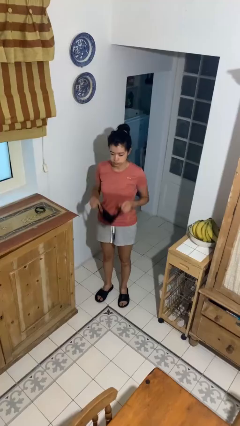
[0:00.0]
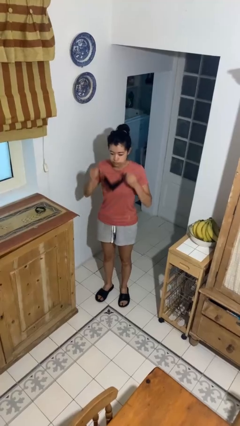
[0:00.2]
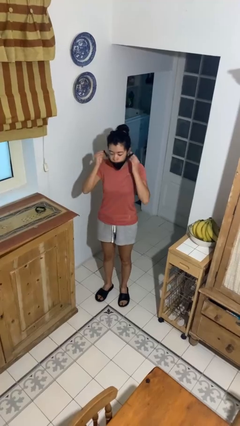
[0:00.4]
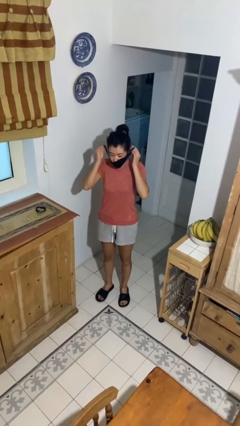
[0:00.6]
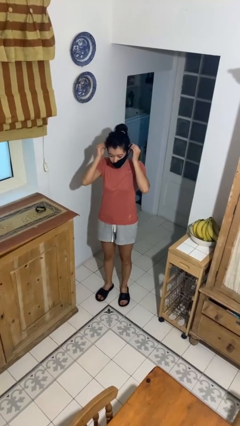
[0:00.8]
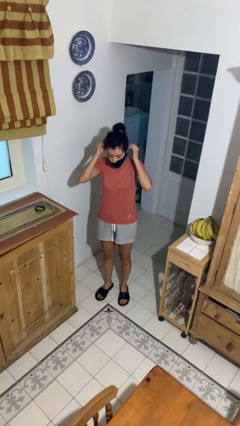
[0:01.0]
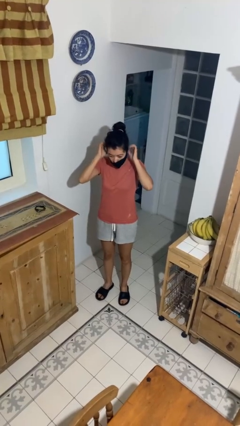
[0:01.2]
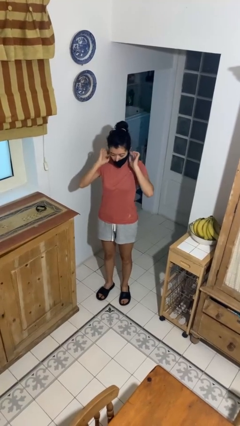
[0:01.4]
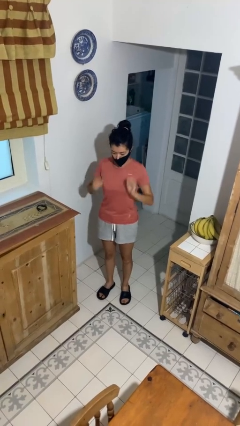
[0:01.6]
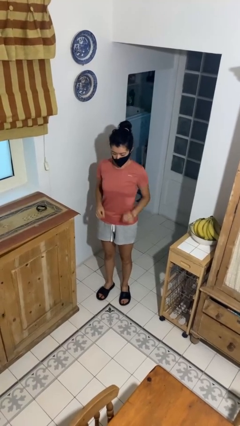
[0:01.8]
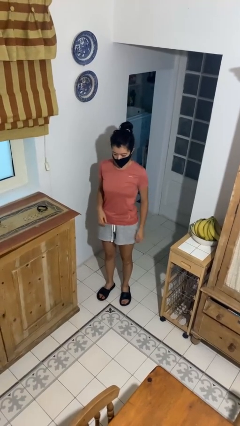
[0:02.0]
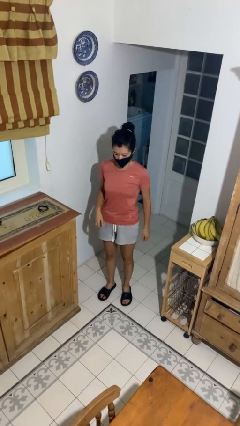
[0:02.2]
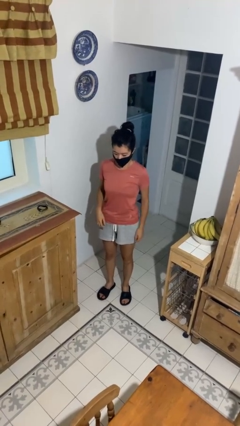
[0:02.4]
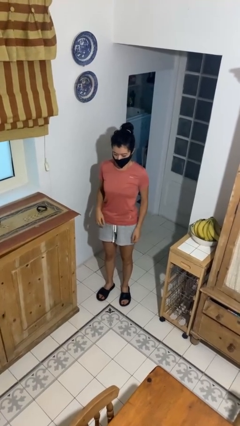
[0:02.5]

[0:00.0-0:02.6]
person puts on facemask

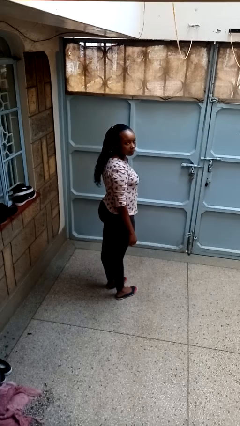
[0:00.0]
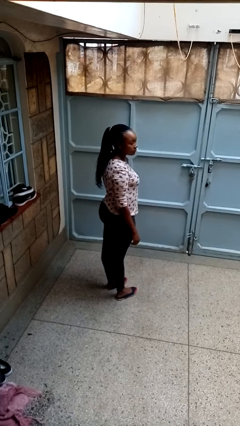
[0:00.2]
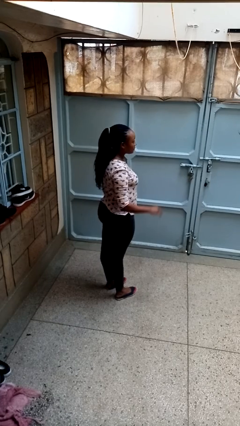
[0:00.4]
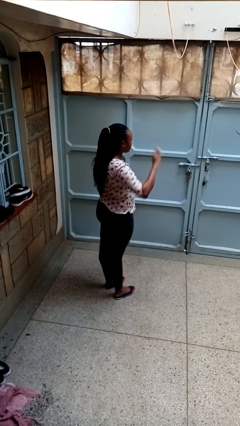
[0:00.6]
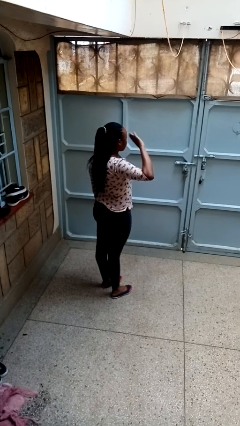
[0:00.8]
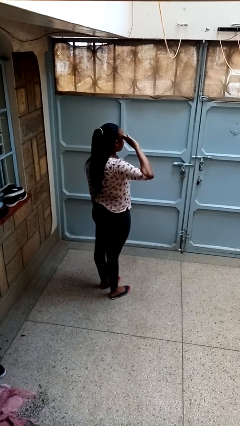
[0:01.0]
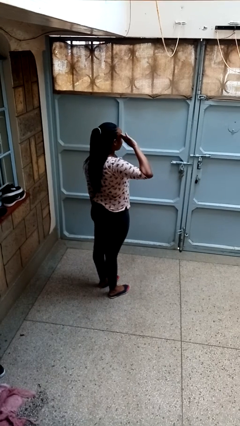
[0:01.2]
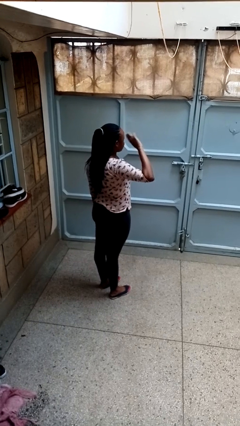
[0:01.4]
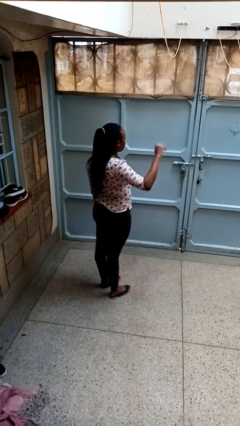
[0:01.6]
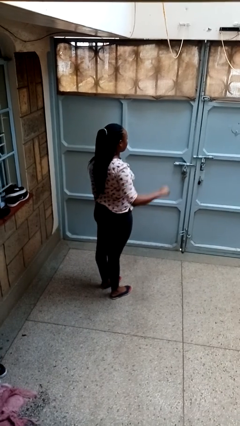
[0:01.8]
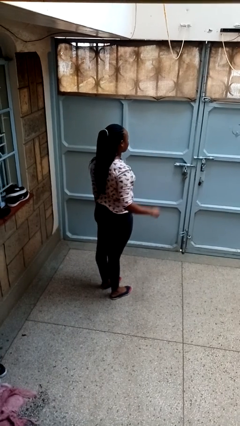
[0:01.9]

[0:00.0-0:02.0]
person salutes

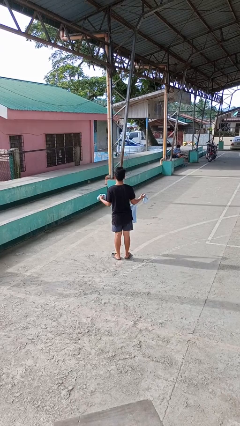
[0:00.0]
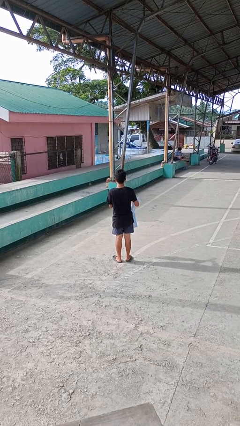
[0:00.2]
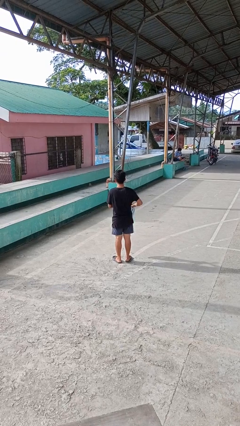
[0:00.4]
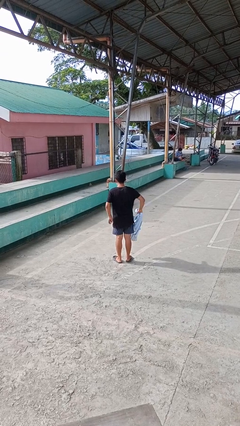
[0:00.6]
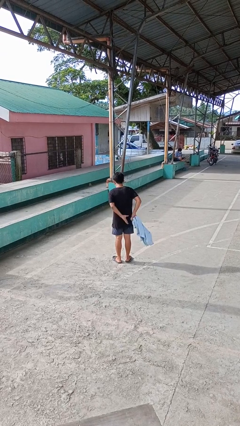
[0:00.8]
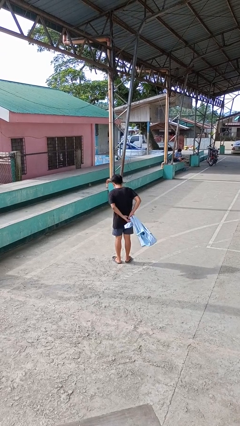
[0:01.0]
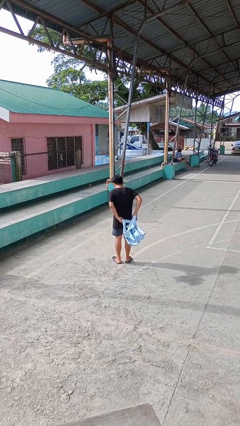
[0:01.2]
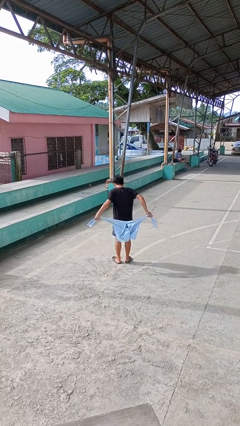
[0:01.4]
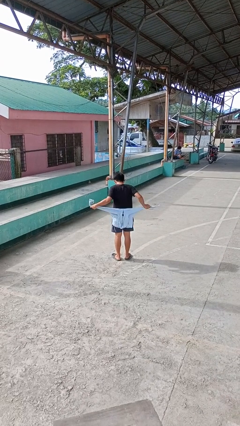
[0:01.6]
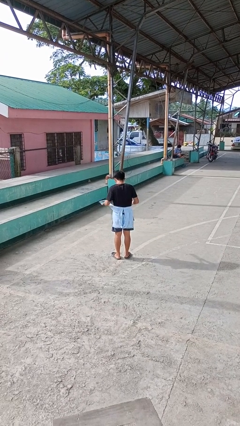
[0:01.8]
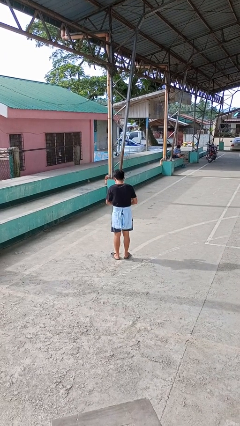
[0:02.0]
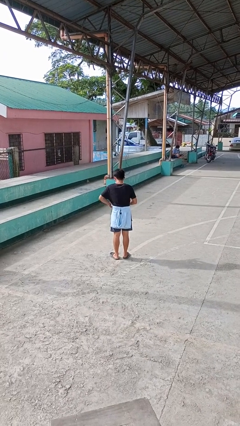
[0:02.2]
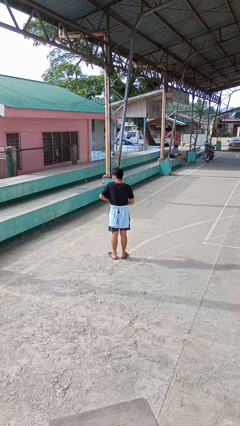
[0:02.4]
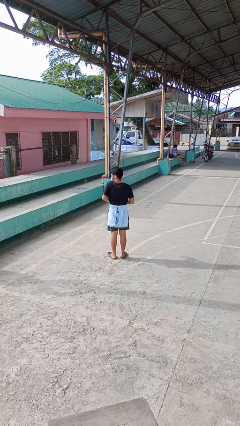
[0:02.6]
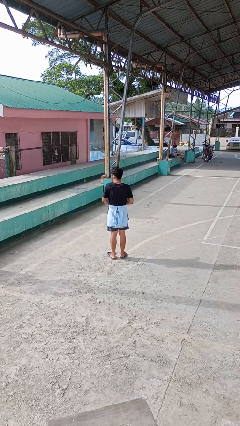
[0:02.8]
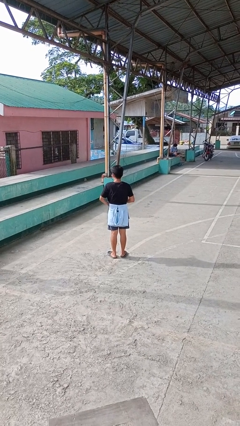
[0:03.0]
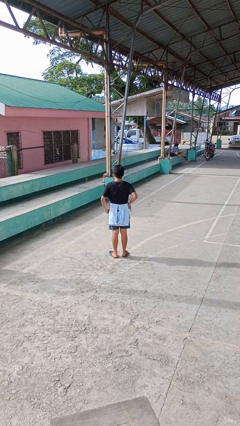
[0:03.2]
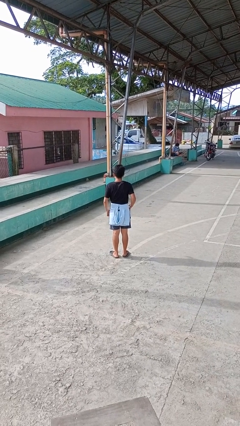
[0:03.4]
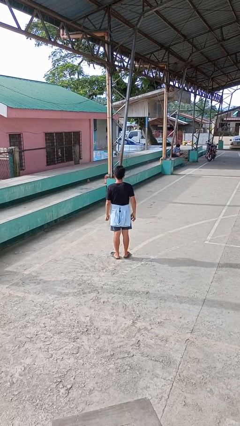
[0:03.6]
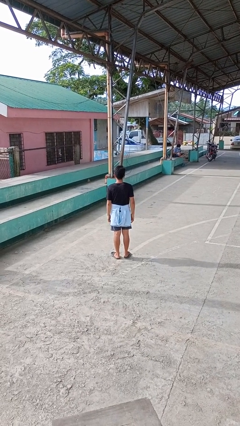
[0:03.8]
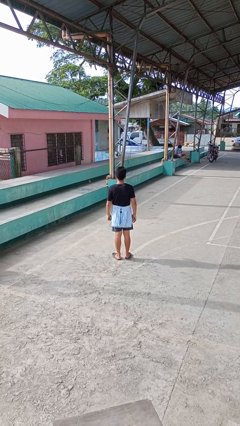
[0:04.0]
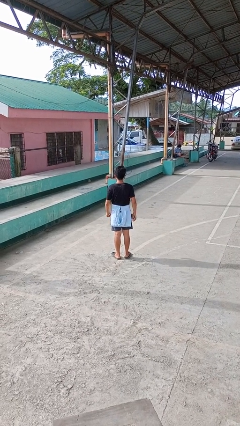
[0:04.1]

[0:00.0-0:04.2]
person ties jacket around waist

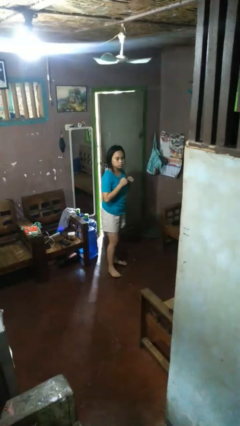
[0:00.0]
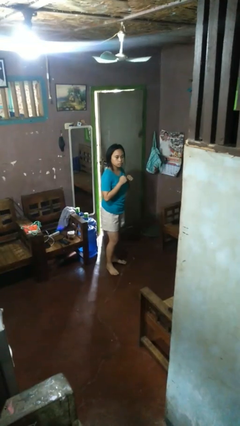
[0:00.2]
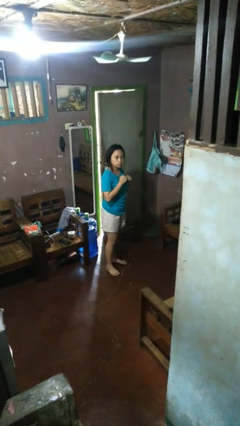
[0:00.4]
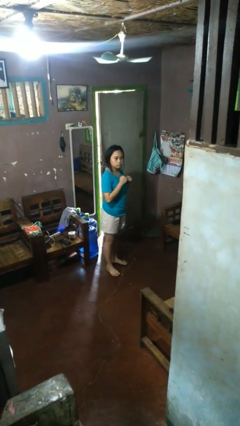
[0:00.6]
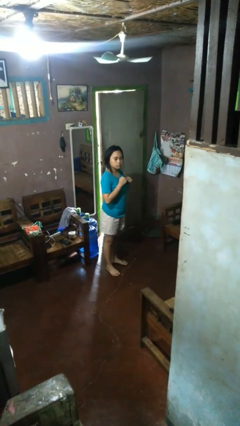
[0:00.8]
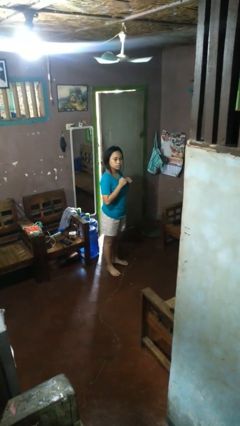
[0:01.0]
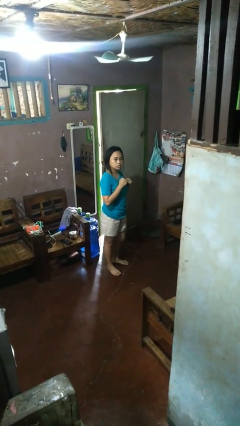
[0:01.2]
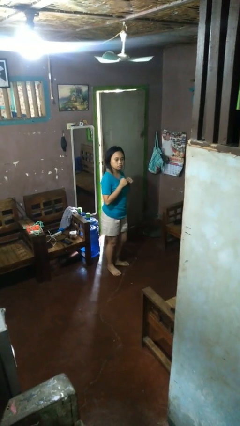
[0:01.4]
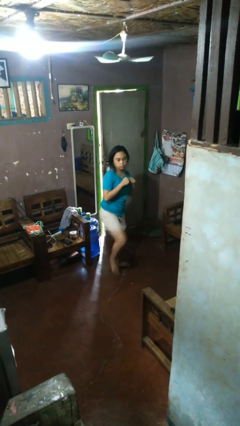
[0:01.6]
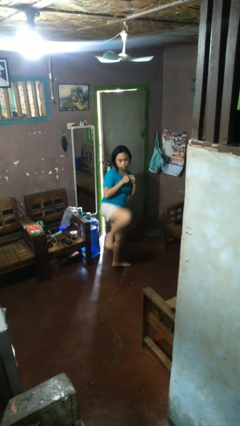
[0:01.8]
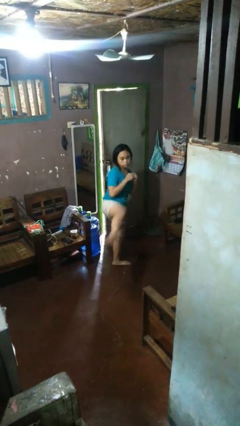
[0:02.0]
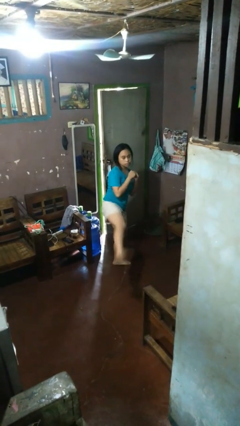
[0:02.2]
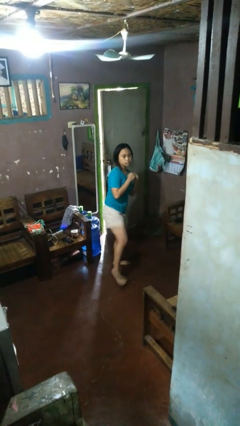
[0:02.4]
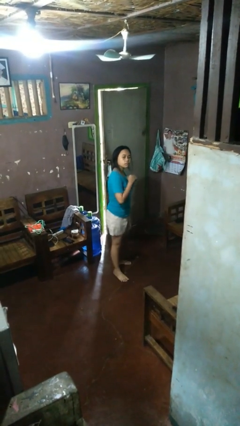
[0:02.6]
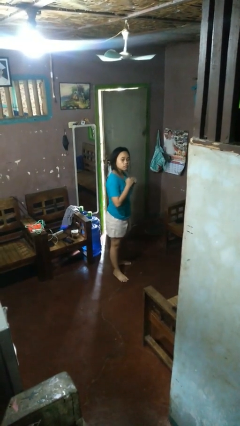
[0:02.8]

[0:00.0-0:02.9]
person karate kicks

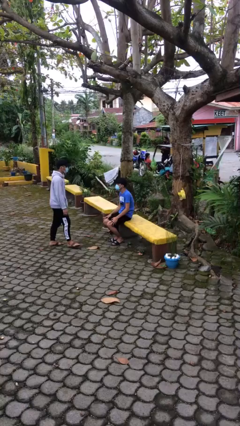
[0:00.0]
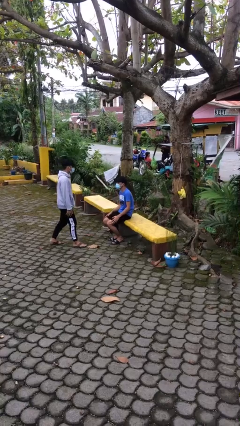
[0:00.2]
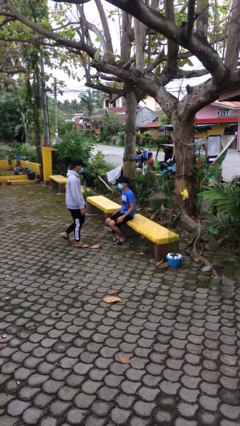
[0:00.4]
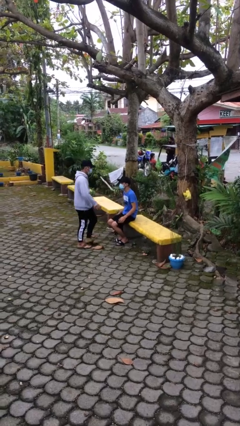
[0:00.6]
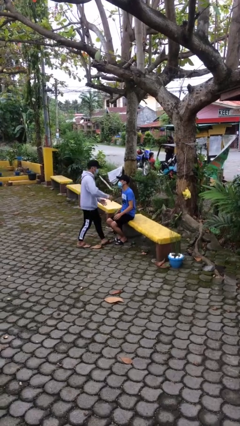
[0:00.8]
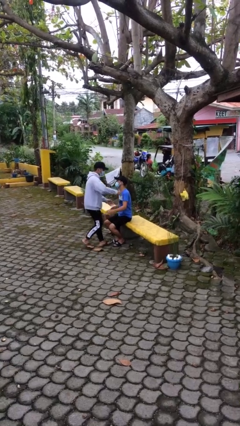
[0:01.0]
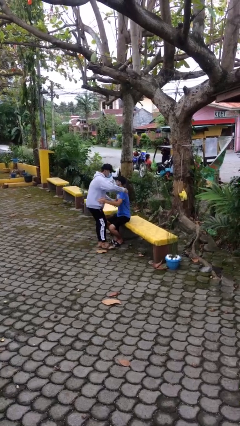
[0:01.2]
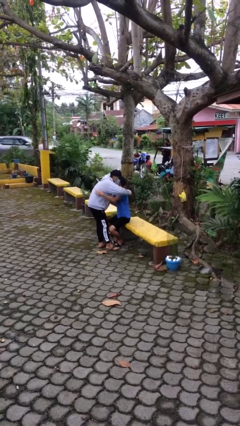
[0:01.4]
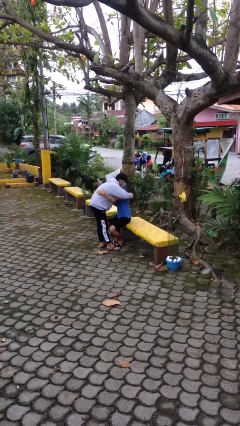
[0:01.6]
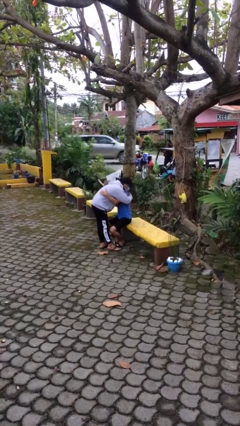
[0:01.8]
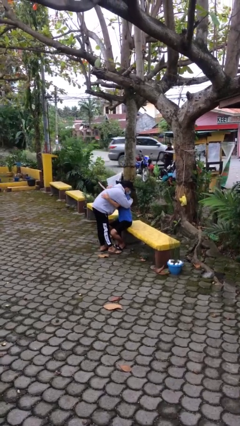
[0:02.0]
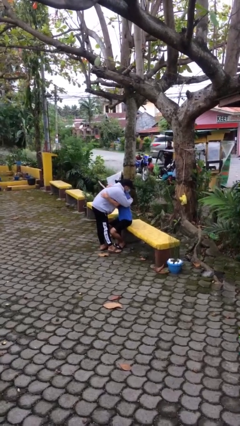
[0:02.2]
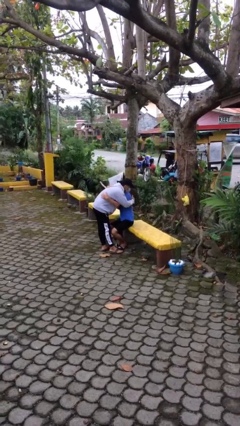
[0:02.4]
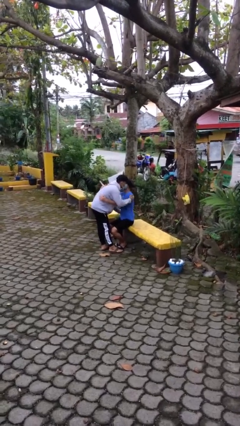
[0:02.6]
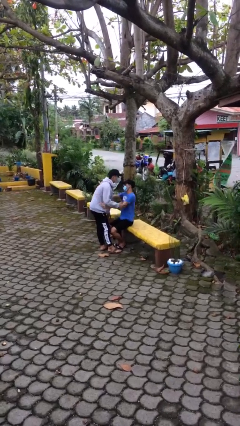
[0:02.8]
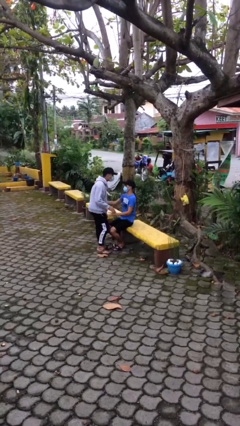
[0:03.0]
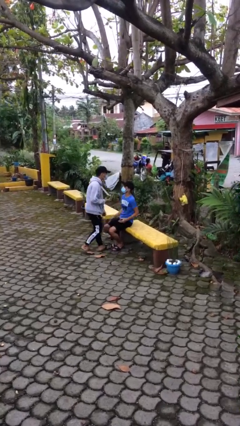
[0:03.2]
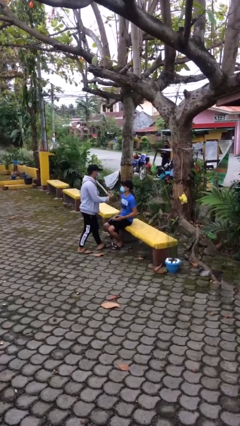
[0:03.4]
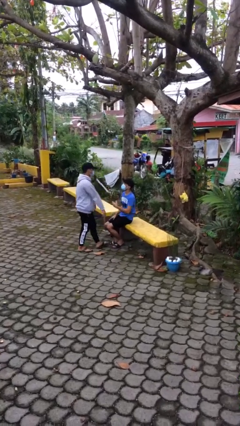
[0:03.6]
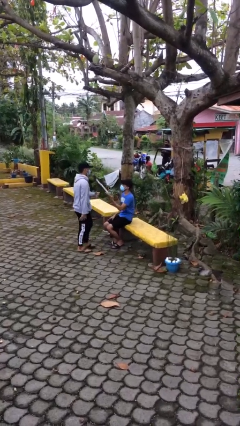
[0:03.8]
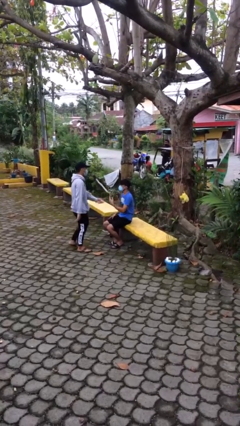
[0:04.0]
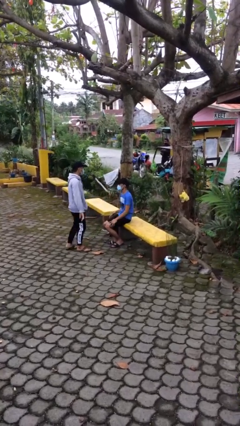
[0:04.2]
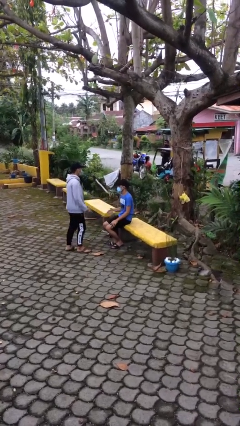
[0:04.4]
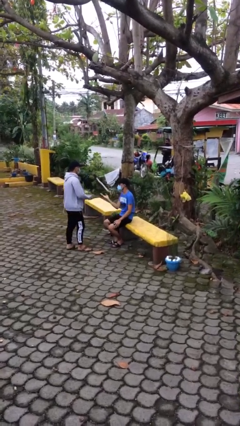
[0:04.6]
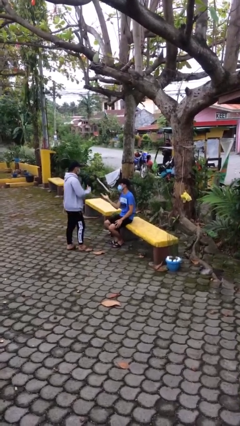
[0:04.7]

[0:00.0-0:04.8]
person embraces person

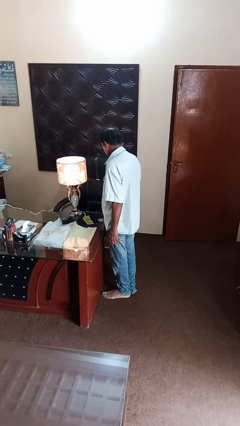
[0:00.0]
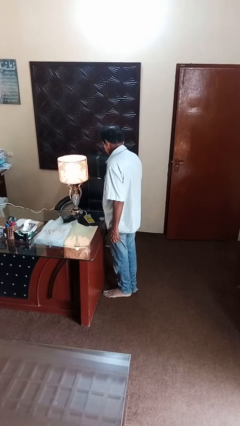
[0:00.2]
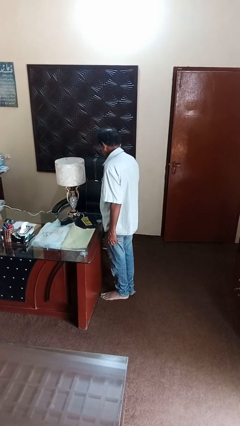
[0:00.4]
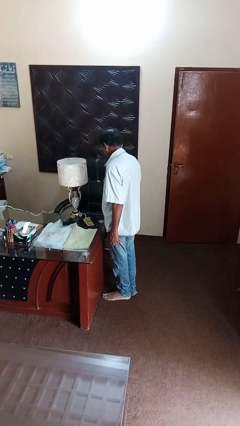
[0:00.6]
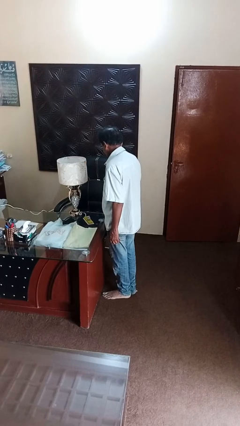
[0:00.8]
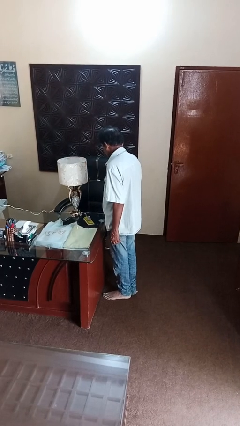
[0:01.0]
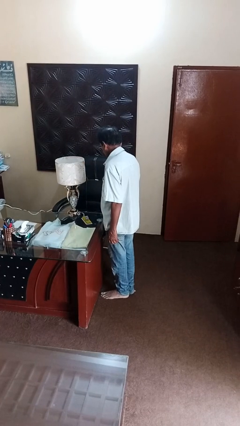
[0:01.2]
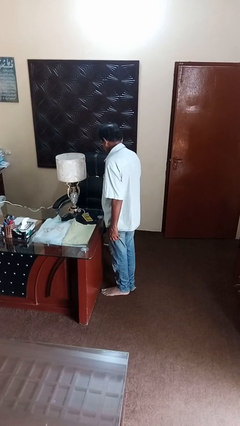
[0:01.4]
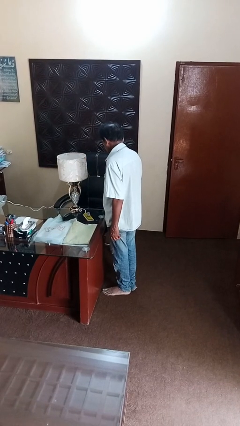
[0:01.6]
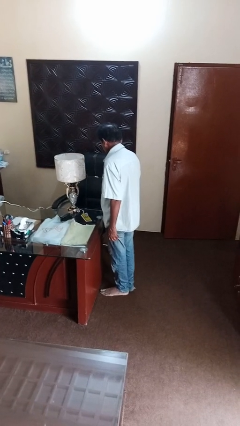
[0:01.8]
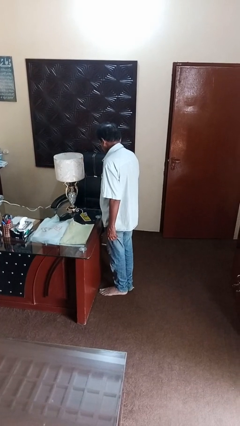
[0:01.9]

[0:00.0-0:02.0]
person turns off lamp
